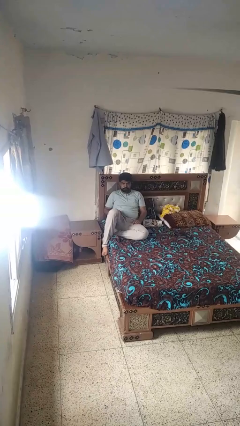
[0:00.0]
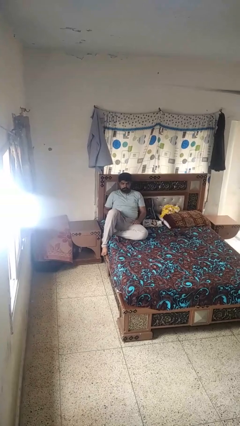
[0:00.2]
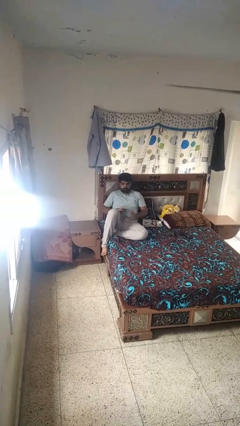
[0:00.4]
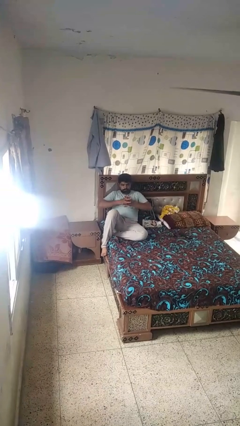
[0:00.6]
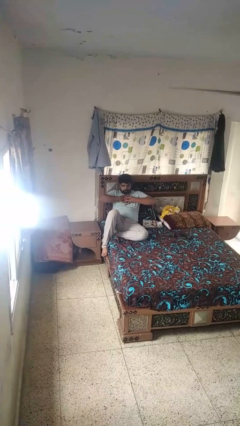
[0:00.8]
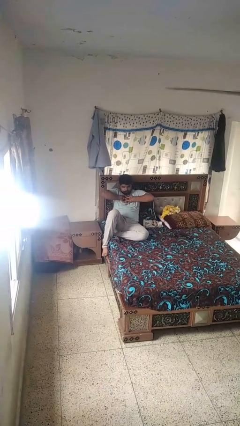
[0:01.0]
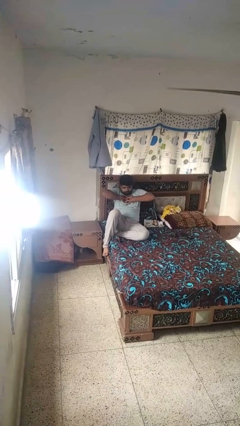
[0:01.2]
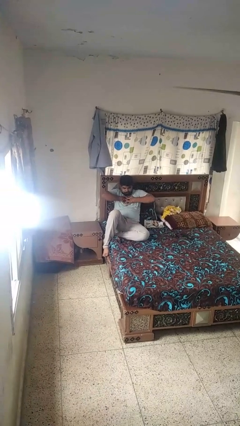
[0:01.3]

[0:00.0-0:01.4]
person cracks knuckles

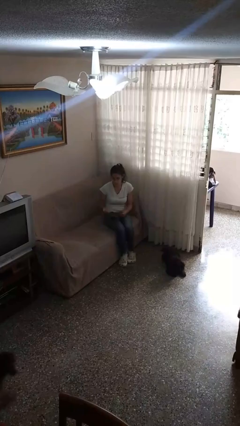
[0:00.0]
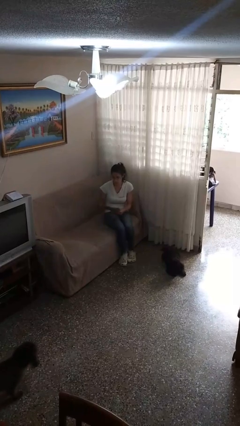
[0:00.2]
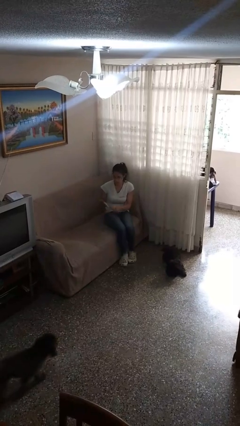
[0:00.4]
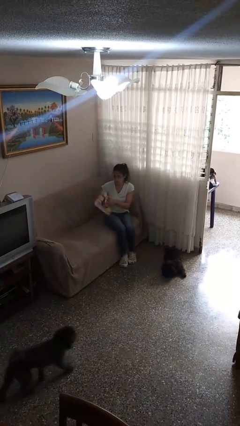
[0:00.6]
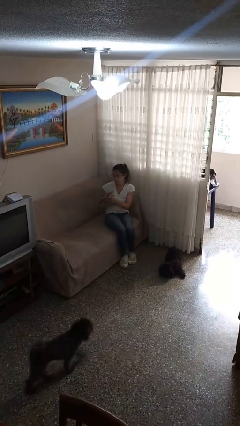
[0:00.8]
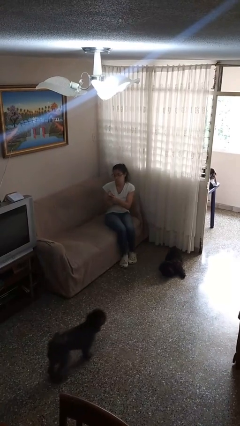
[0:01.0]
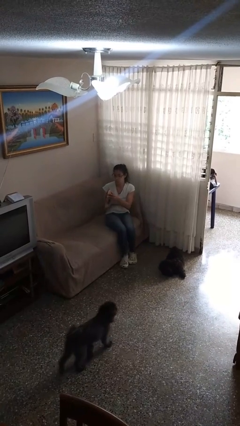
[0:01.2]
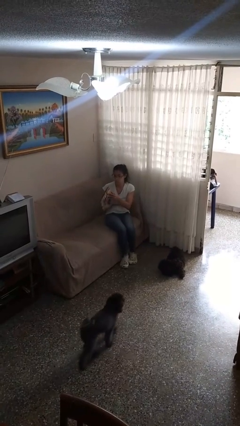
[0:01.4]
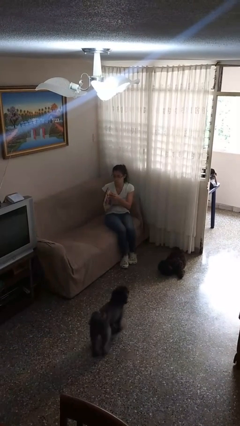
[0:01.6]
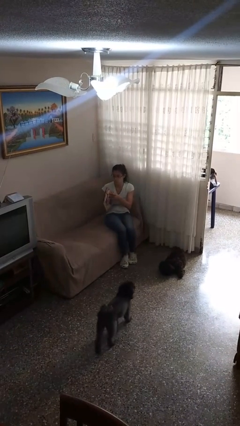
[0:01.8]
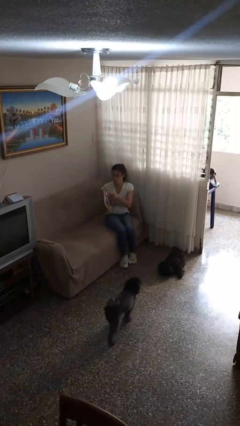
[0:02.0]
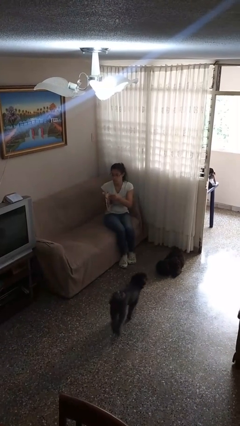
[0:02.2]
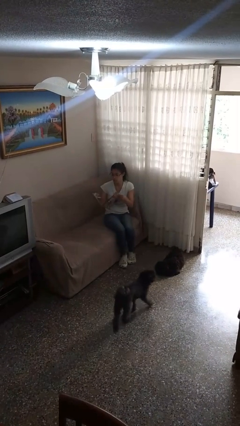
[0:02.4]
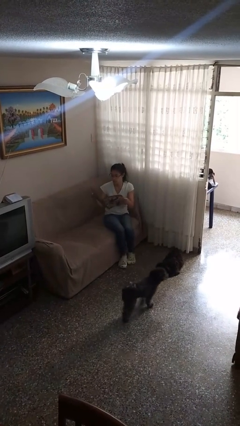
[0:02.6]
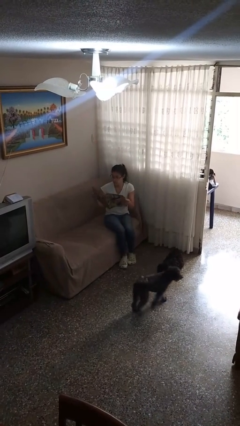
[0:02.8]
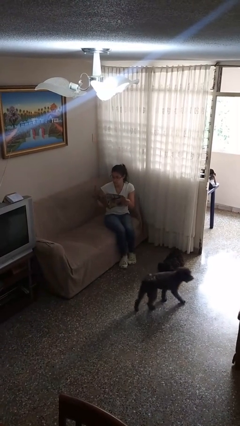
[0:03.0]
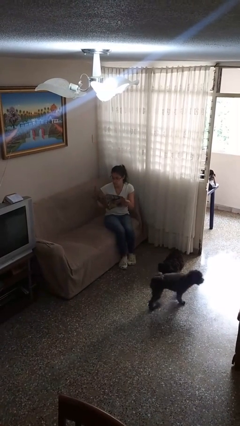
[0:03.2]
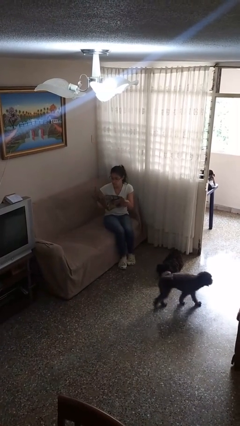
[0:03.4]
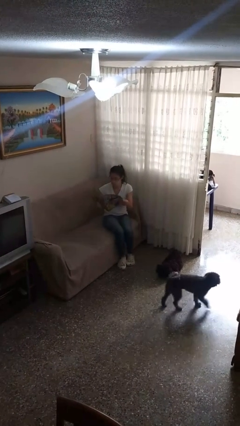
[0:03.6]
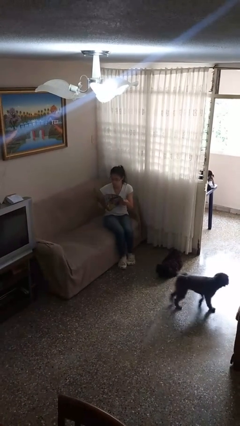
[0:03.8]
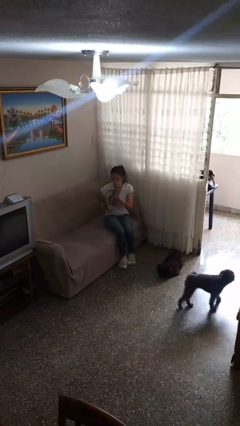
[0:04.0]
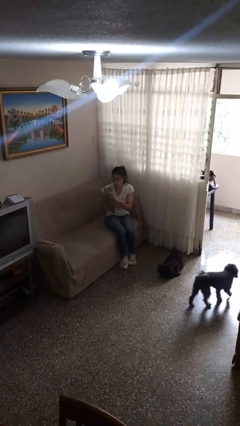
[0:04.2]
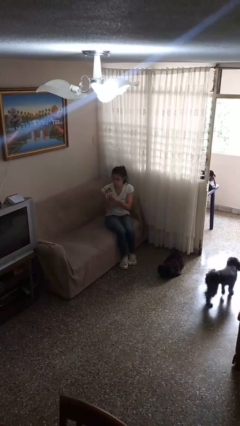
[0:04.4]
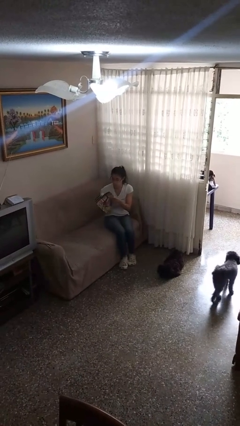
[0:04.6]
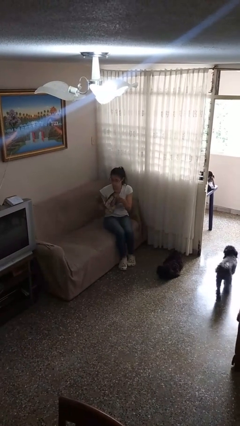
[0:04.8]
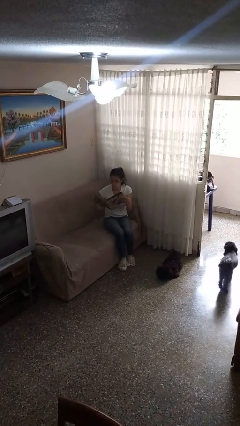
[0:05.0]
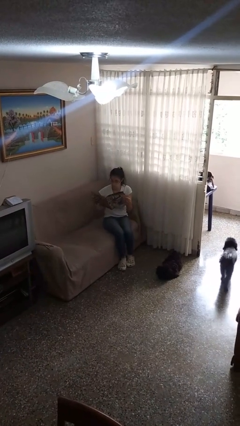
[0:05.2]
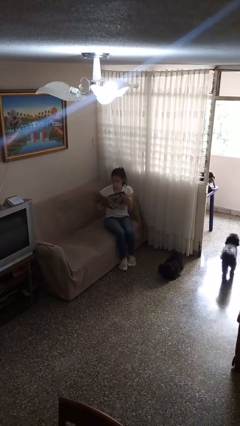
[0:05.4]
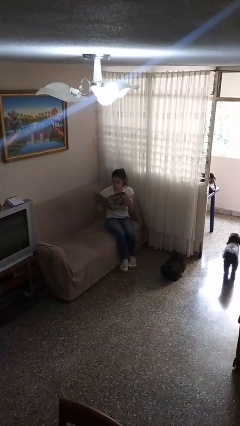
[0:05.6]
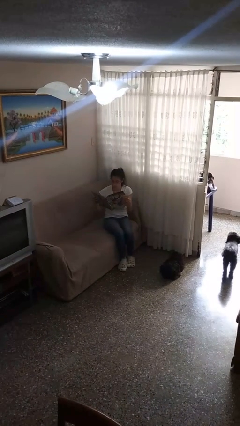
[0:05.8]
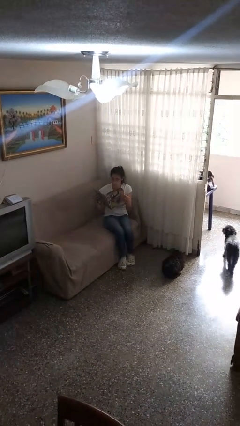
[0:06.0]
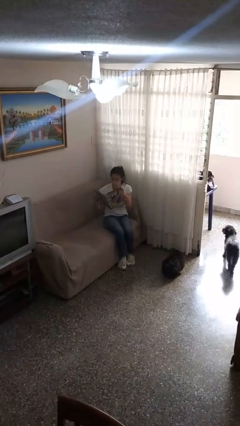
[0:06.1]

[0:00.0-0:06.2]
person reads magazine

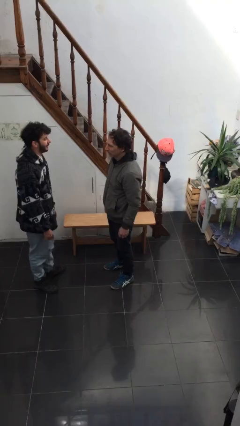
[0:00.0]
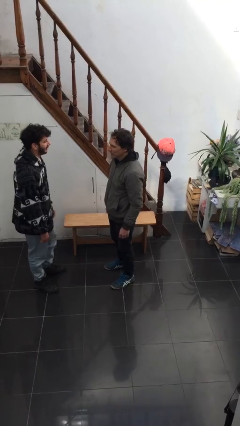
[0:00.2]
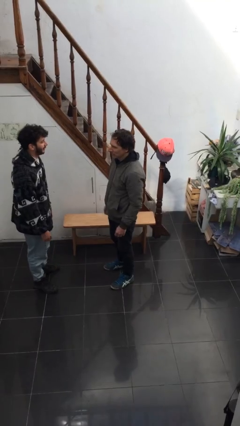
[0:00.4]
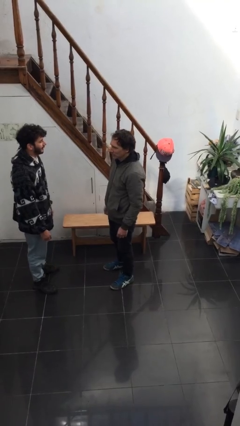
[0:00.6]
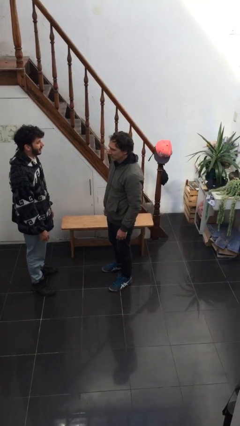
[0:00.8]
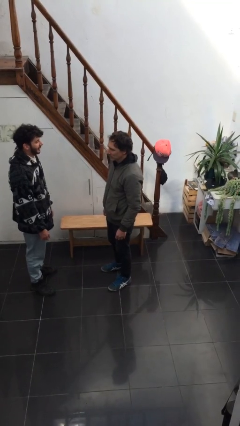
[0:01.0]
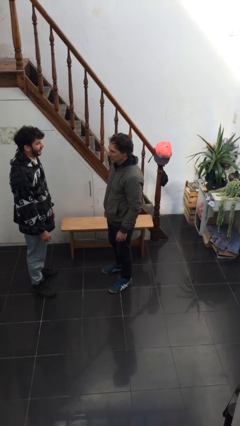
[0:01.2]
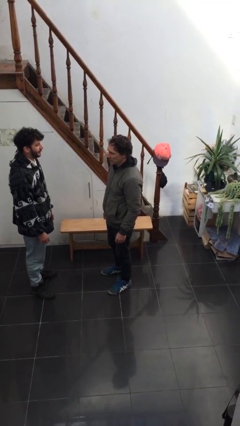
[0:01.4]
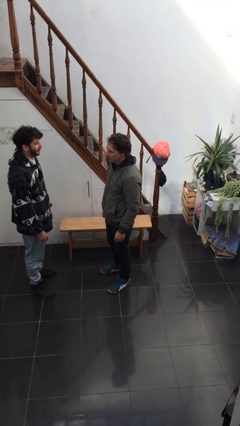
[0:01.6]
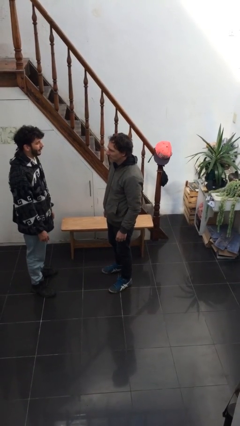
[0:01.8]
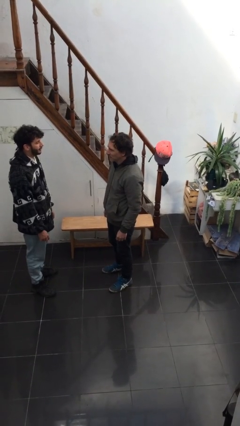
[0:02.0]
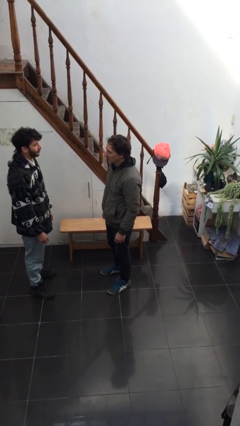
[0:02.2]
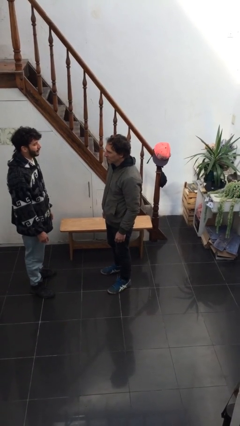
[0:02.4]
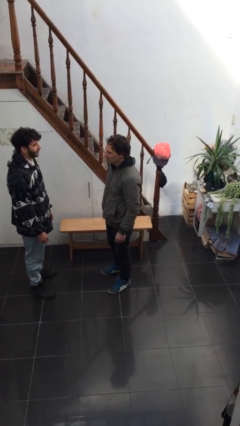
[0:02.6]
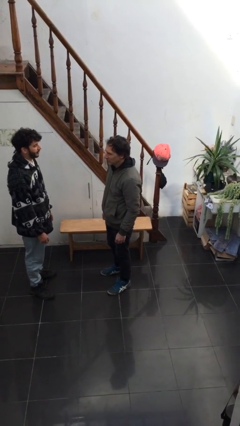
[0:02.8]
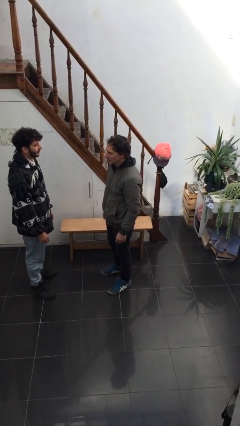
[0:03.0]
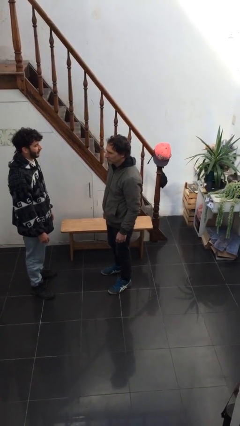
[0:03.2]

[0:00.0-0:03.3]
person talks to person

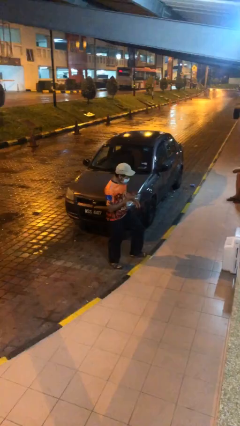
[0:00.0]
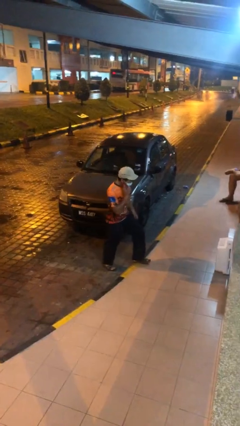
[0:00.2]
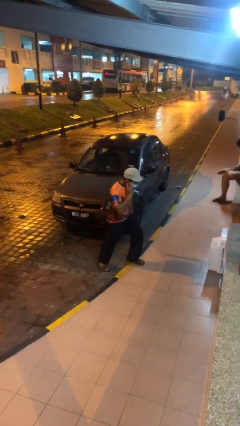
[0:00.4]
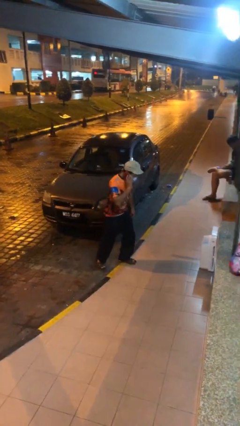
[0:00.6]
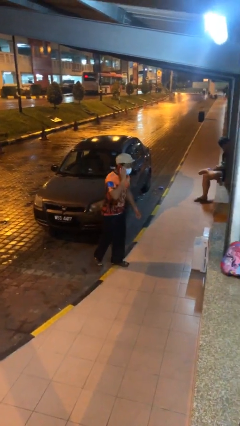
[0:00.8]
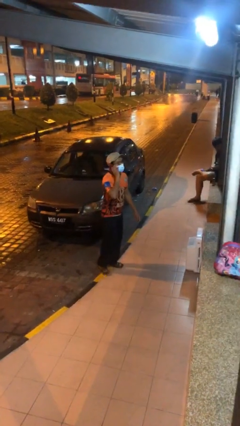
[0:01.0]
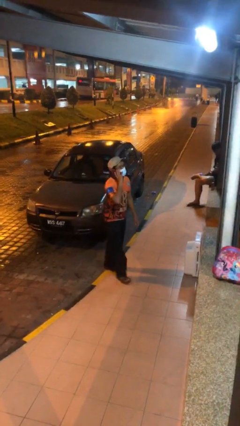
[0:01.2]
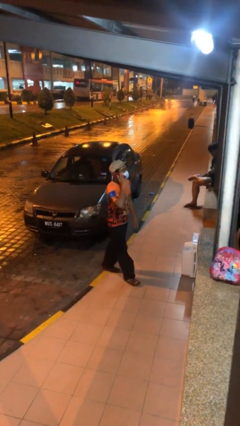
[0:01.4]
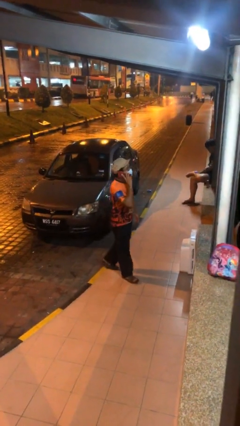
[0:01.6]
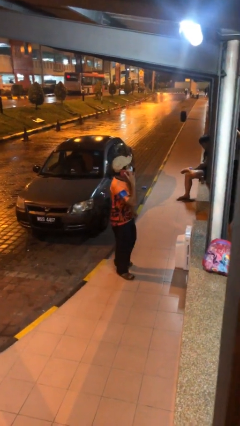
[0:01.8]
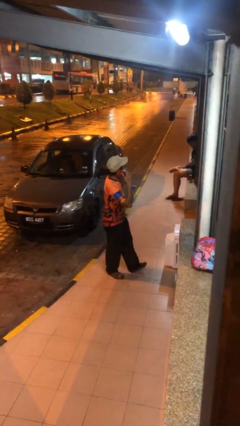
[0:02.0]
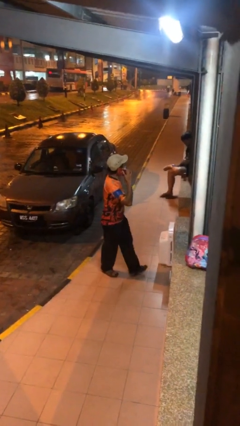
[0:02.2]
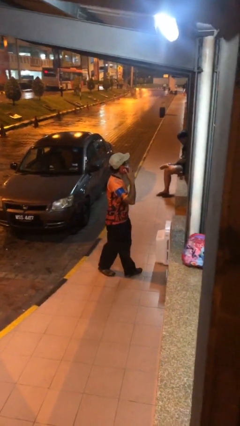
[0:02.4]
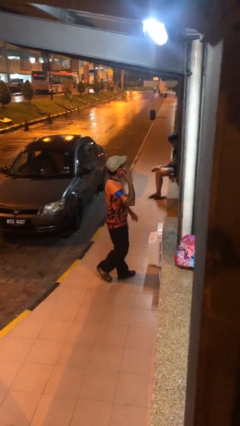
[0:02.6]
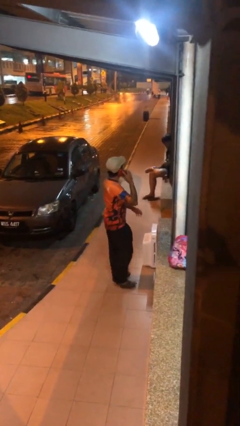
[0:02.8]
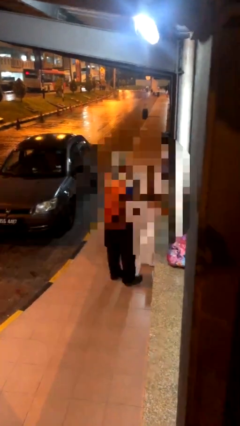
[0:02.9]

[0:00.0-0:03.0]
person talks on phone

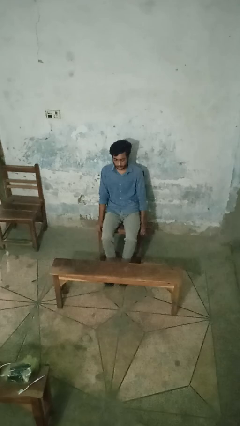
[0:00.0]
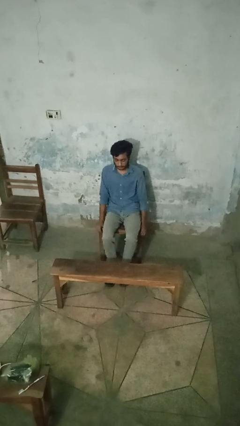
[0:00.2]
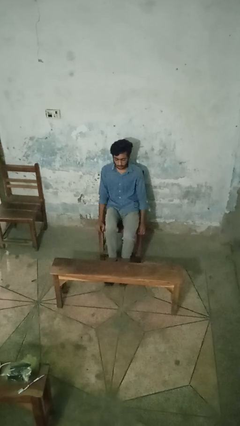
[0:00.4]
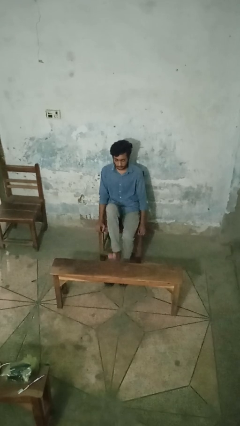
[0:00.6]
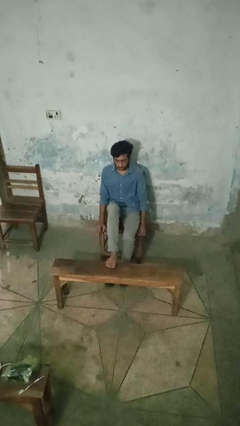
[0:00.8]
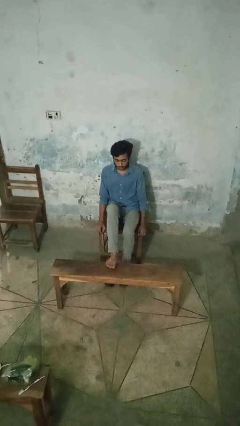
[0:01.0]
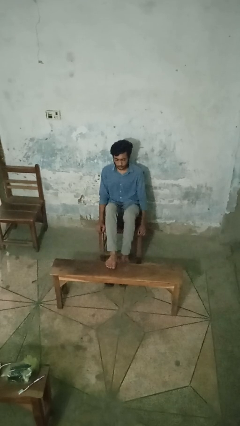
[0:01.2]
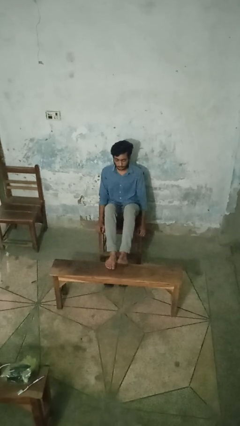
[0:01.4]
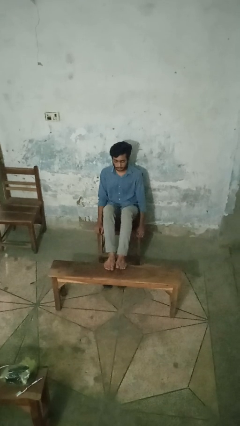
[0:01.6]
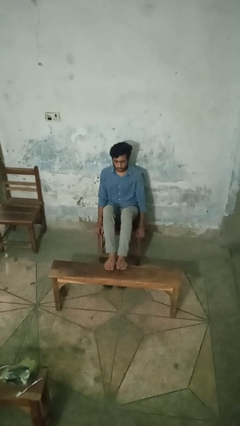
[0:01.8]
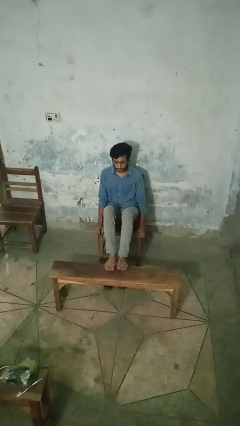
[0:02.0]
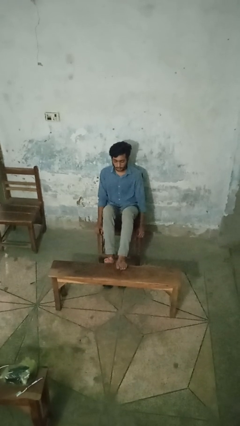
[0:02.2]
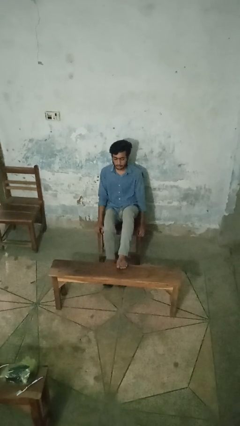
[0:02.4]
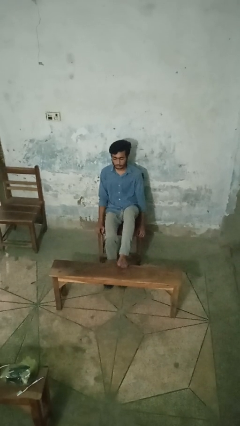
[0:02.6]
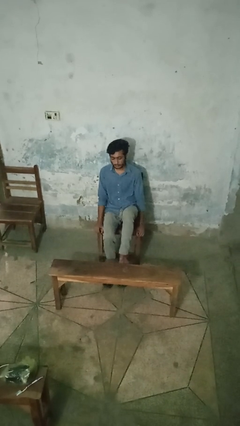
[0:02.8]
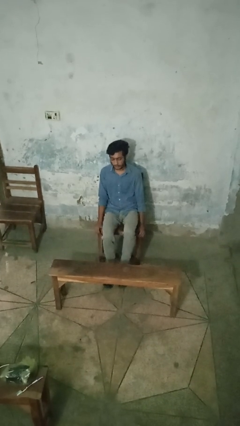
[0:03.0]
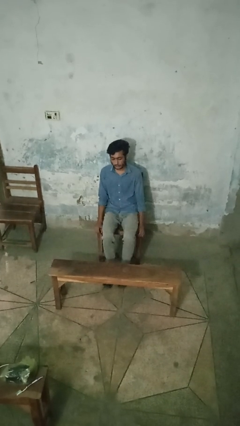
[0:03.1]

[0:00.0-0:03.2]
person puts feet up

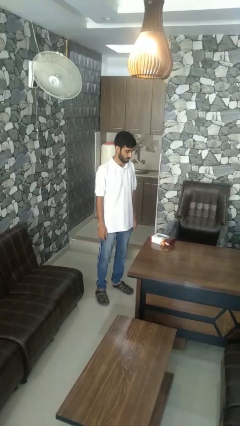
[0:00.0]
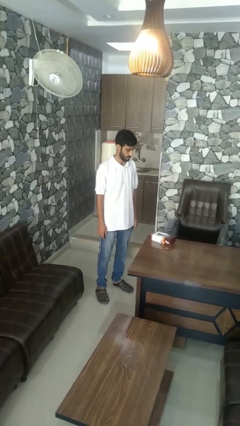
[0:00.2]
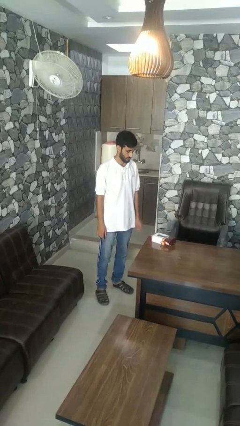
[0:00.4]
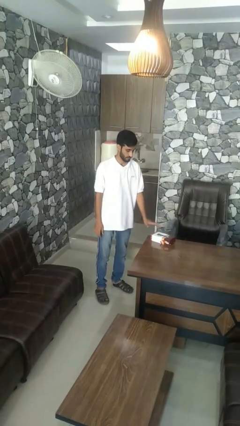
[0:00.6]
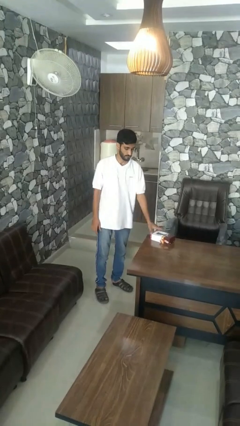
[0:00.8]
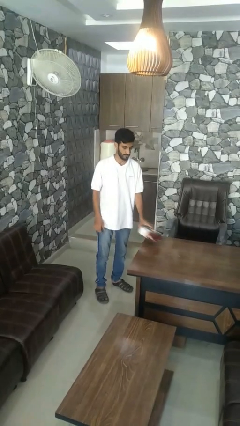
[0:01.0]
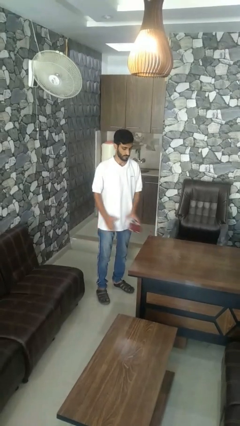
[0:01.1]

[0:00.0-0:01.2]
person picks up object from table
